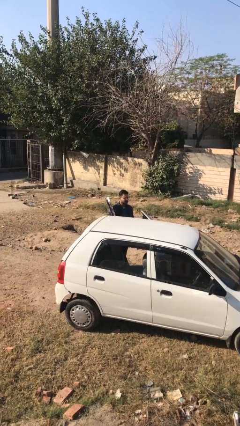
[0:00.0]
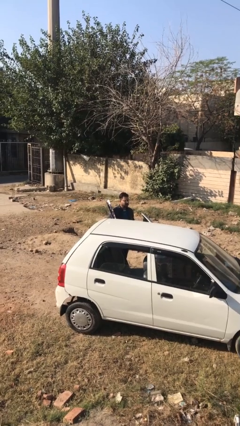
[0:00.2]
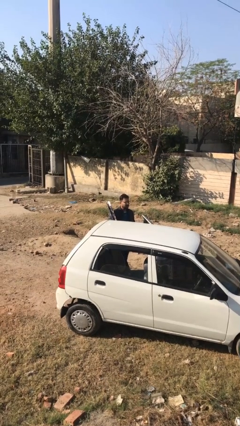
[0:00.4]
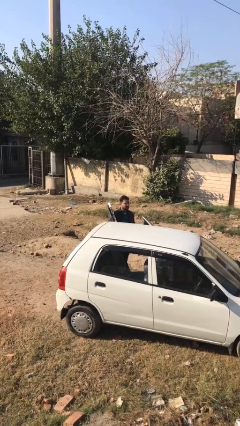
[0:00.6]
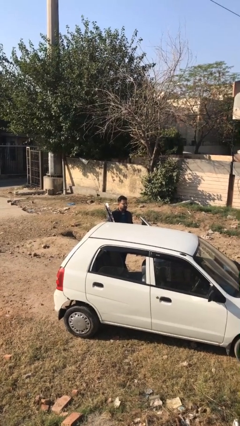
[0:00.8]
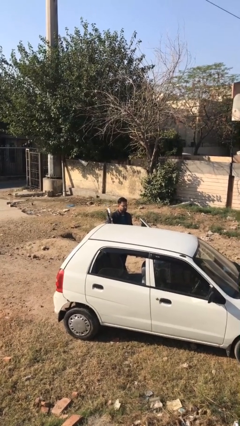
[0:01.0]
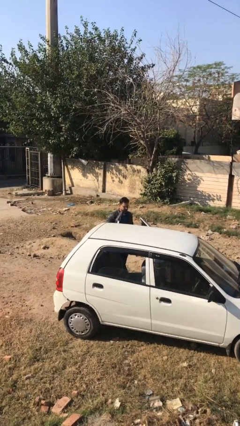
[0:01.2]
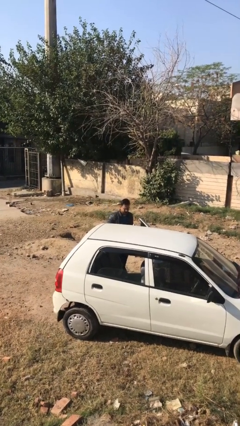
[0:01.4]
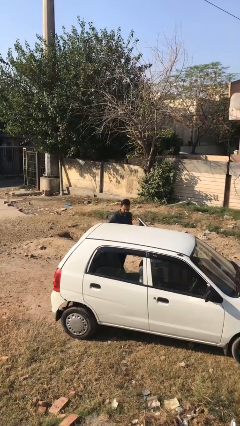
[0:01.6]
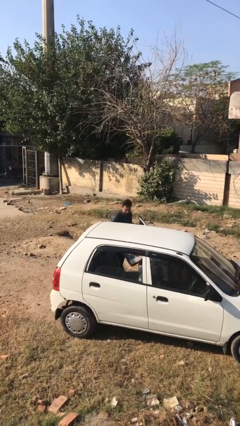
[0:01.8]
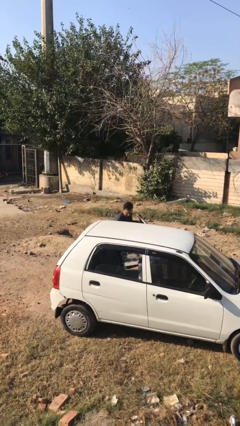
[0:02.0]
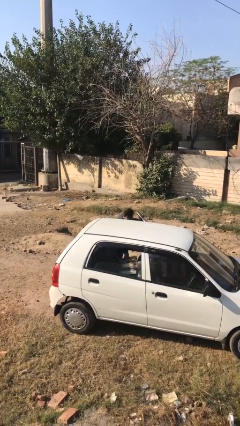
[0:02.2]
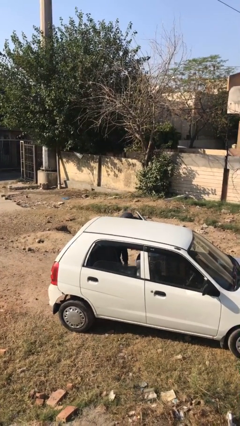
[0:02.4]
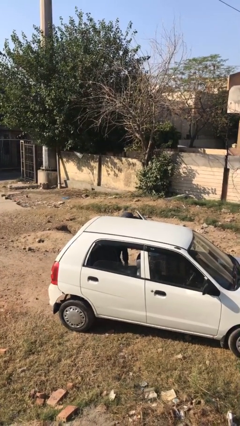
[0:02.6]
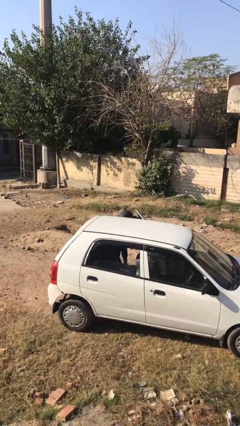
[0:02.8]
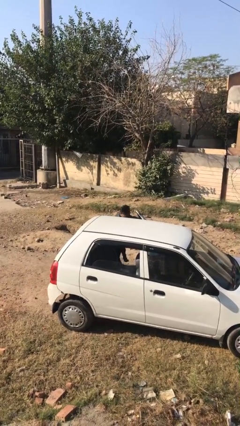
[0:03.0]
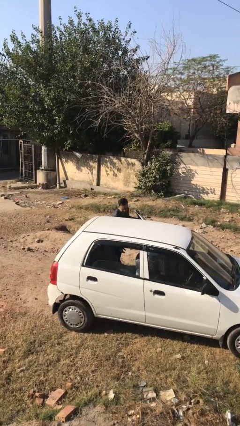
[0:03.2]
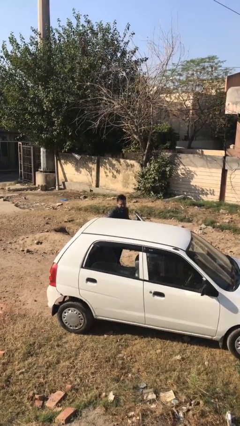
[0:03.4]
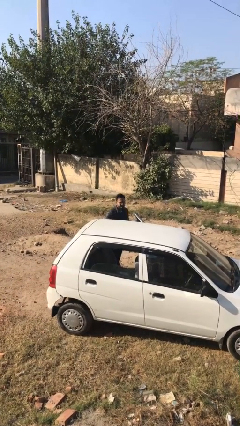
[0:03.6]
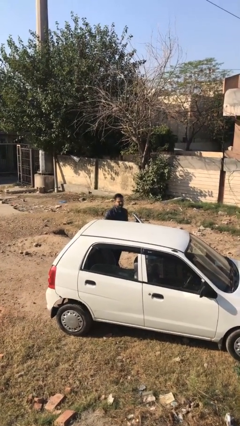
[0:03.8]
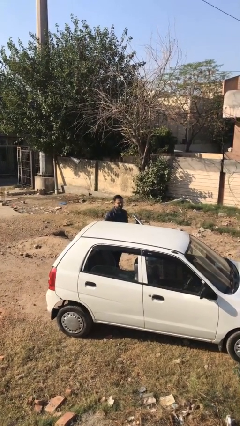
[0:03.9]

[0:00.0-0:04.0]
person loads car

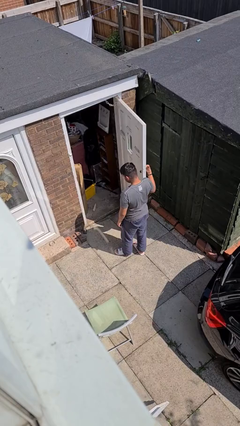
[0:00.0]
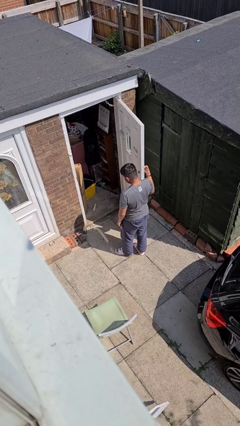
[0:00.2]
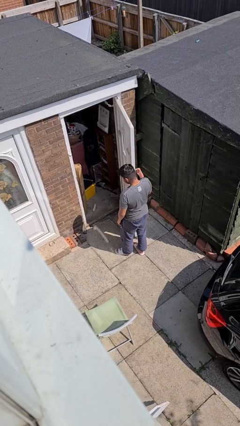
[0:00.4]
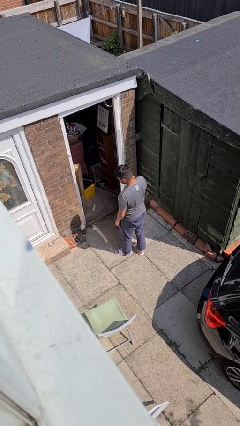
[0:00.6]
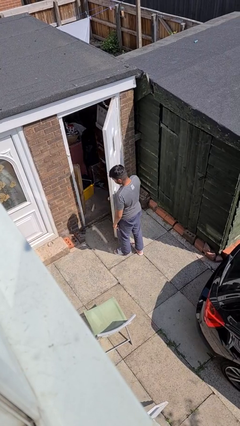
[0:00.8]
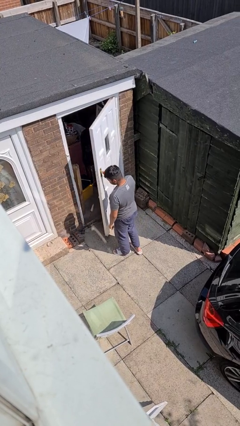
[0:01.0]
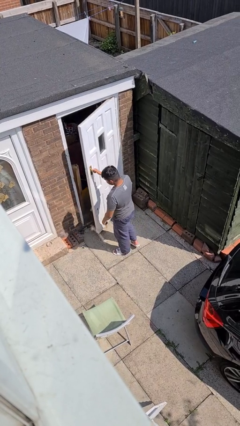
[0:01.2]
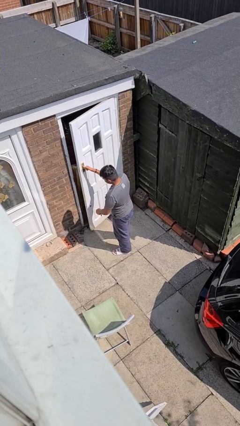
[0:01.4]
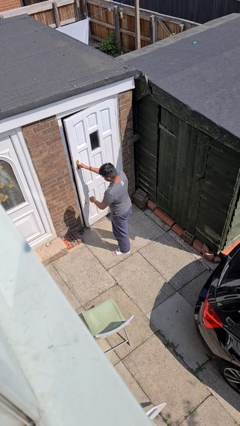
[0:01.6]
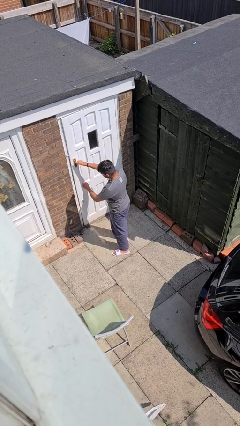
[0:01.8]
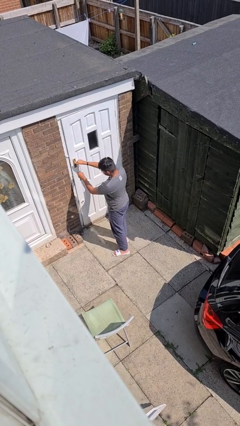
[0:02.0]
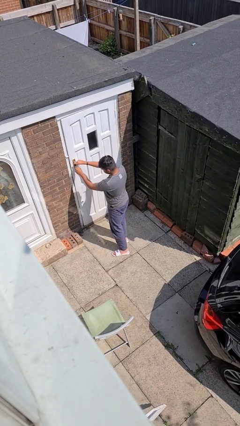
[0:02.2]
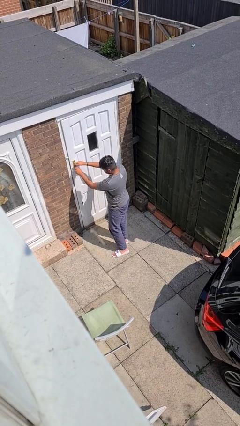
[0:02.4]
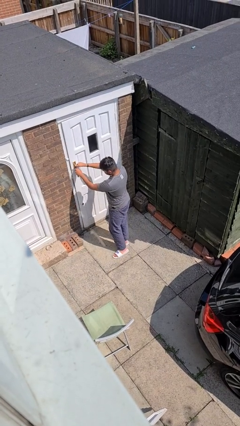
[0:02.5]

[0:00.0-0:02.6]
person closes facility door

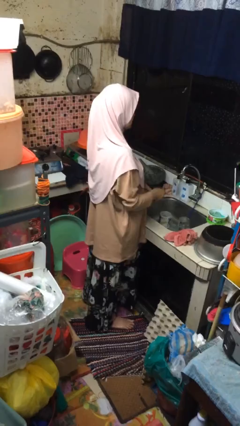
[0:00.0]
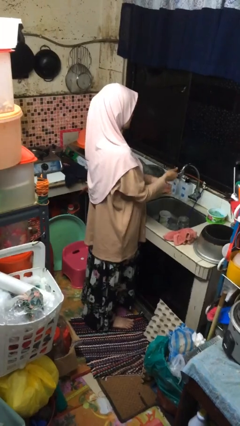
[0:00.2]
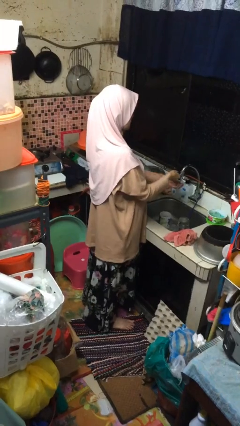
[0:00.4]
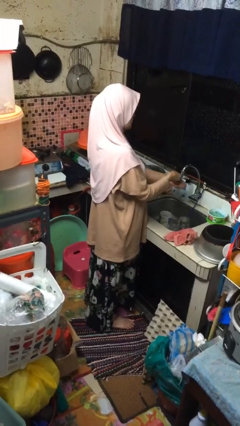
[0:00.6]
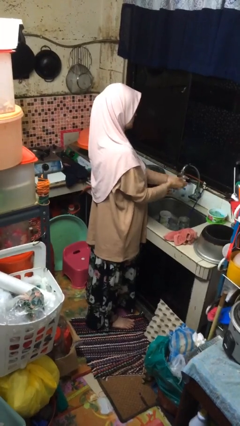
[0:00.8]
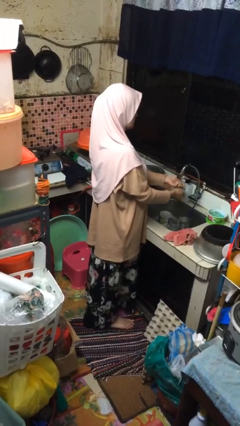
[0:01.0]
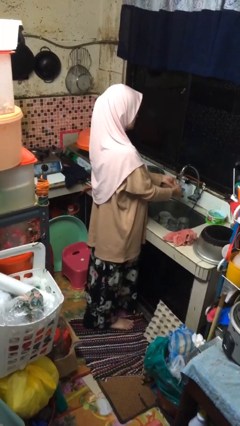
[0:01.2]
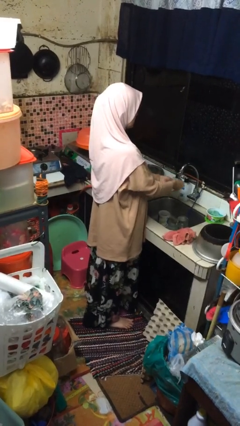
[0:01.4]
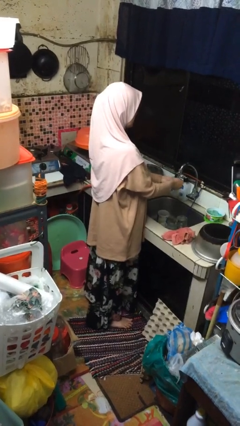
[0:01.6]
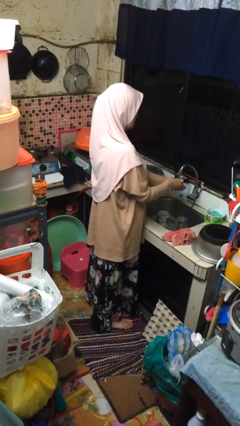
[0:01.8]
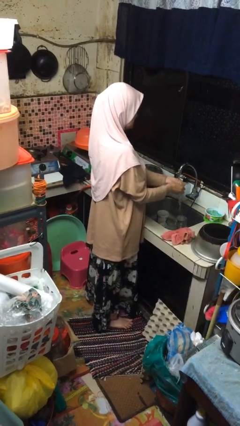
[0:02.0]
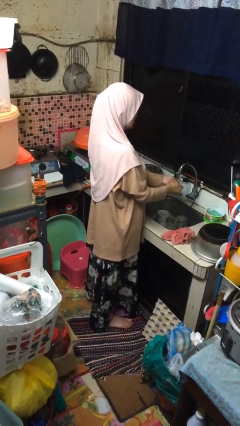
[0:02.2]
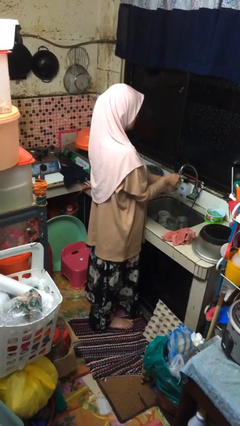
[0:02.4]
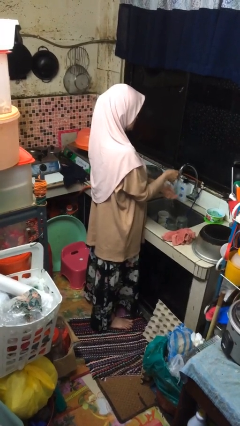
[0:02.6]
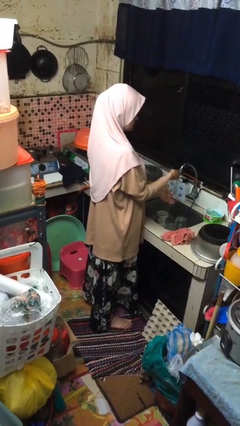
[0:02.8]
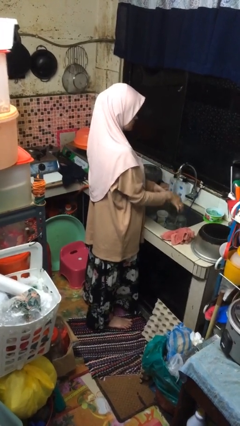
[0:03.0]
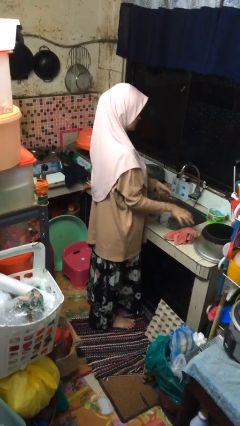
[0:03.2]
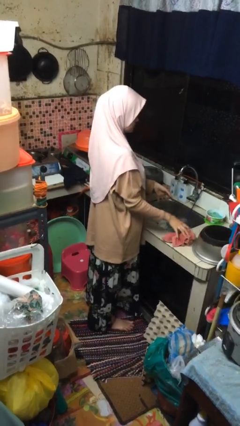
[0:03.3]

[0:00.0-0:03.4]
person washes hands

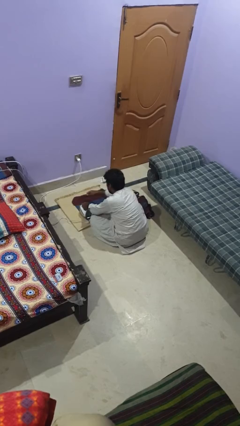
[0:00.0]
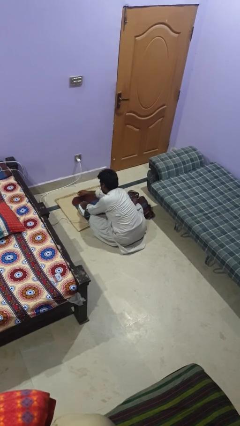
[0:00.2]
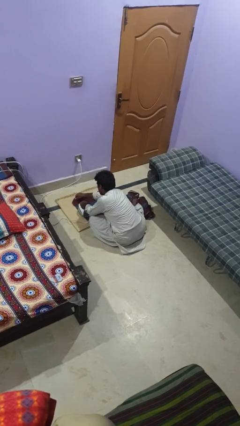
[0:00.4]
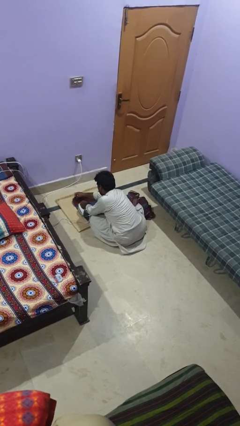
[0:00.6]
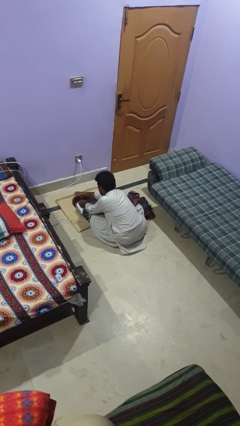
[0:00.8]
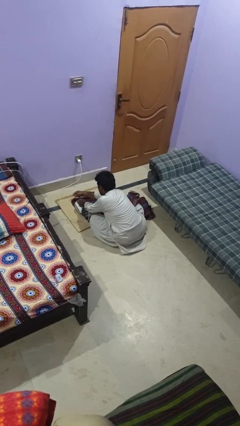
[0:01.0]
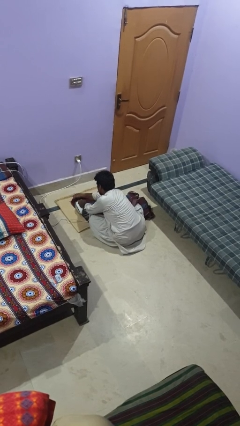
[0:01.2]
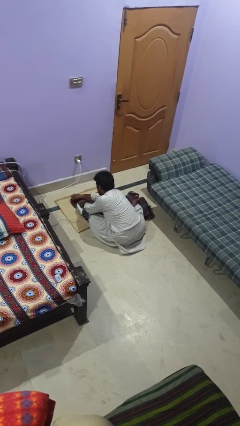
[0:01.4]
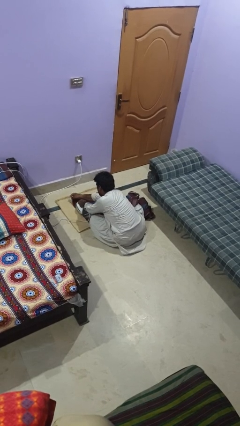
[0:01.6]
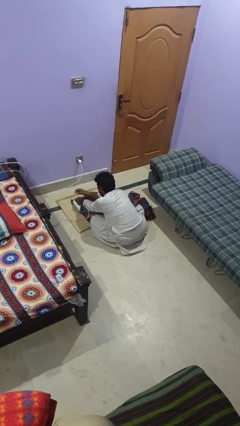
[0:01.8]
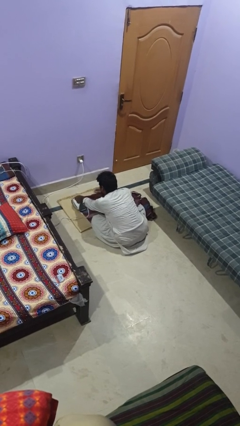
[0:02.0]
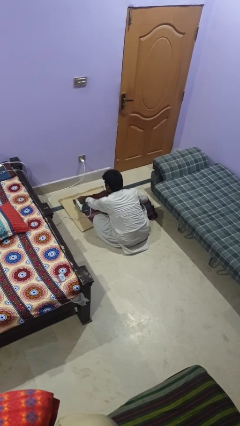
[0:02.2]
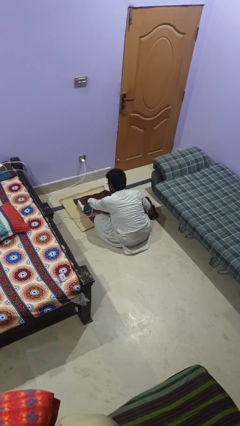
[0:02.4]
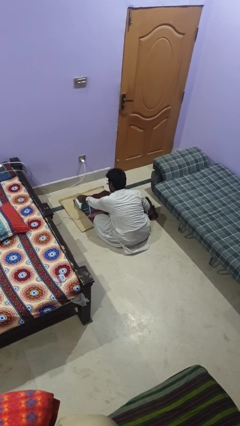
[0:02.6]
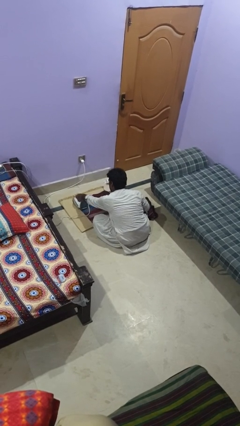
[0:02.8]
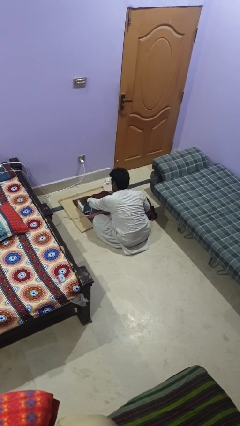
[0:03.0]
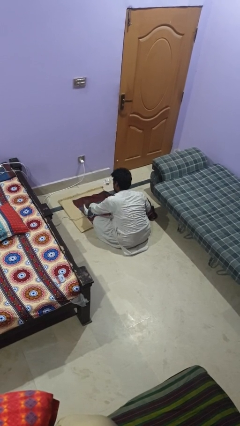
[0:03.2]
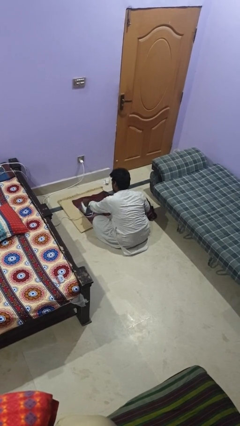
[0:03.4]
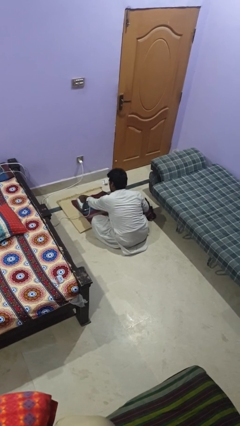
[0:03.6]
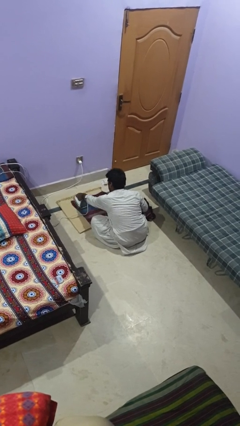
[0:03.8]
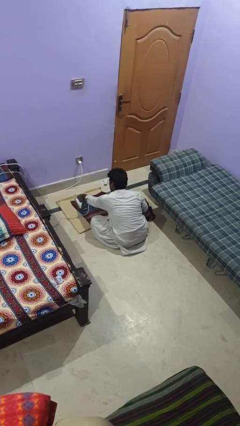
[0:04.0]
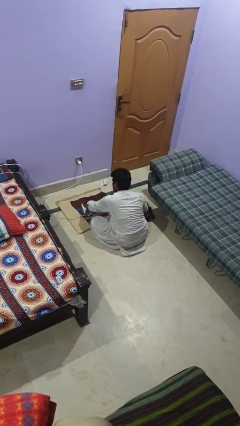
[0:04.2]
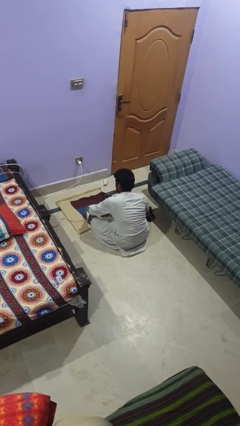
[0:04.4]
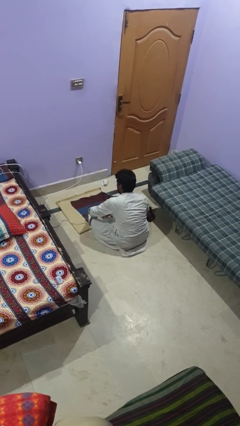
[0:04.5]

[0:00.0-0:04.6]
person irons clothes

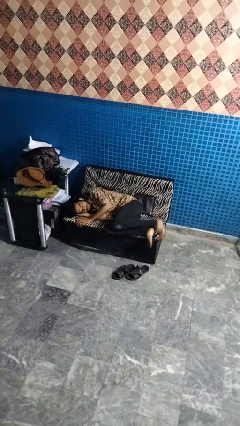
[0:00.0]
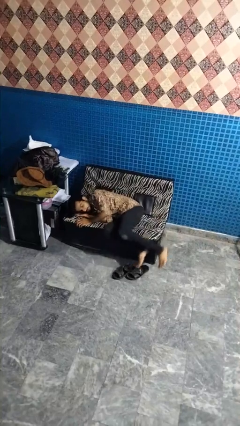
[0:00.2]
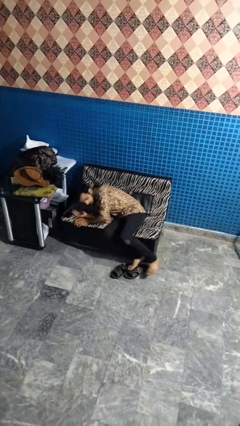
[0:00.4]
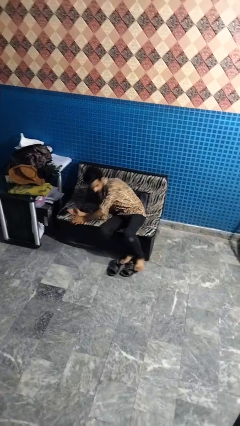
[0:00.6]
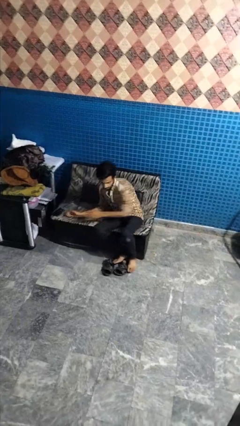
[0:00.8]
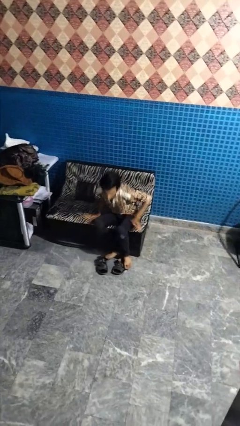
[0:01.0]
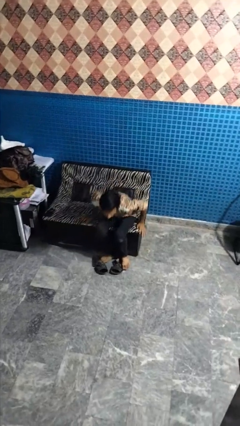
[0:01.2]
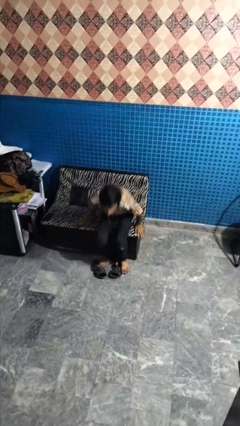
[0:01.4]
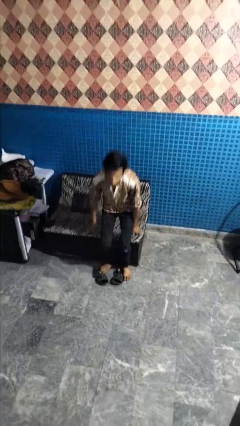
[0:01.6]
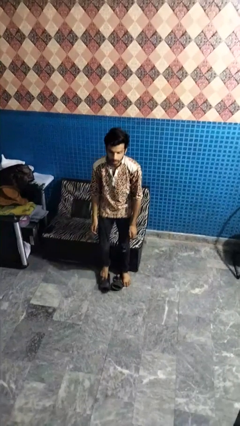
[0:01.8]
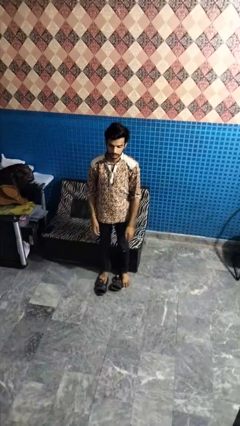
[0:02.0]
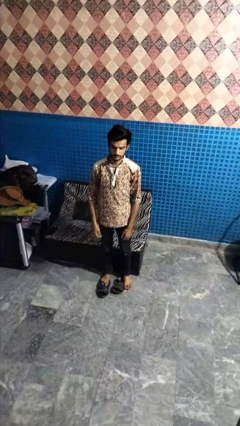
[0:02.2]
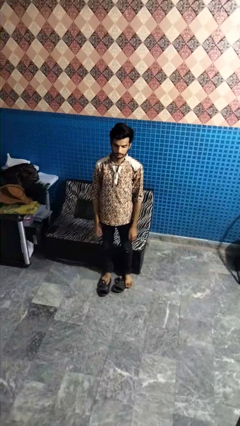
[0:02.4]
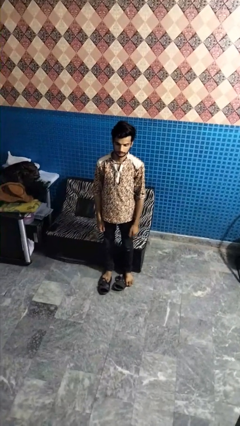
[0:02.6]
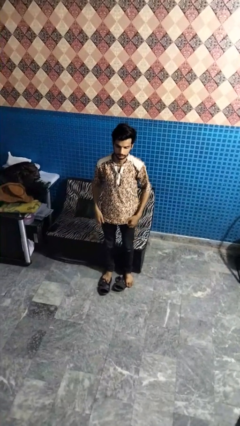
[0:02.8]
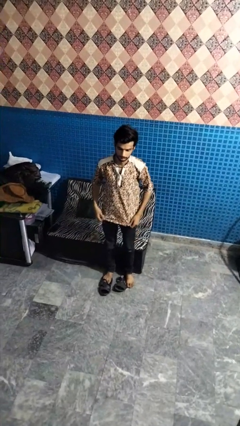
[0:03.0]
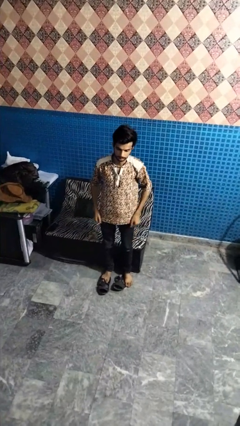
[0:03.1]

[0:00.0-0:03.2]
person stands up
